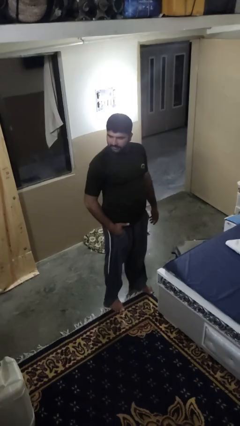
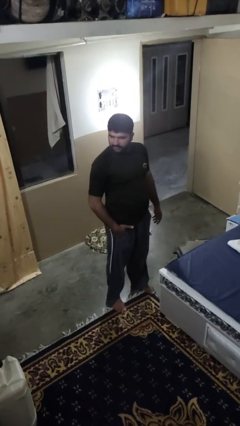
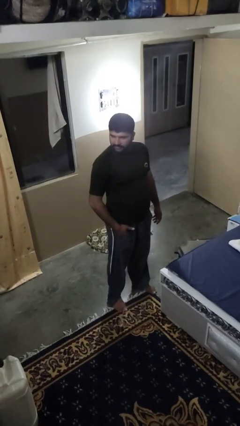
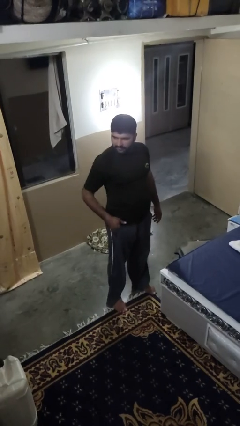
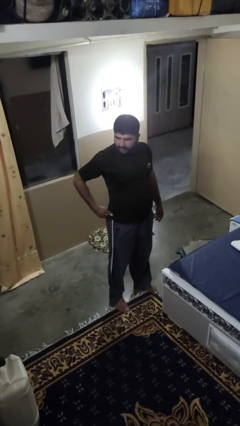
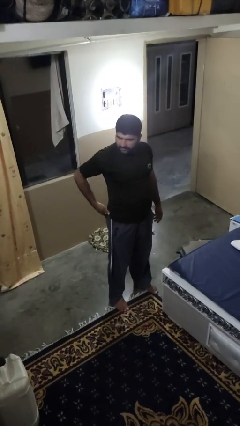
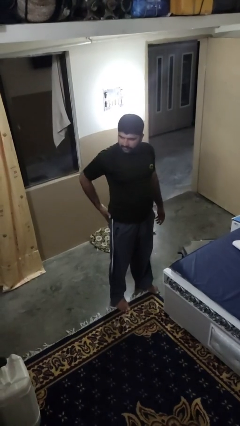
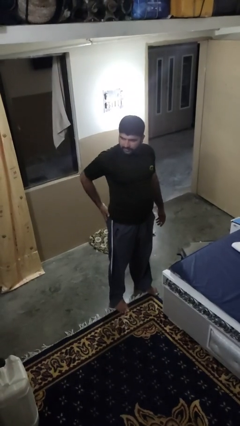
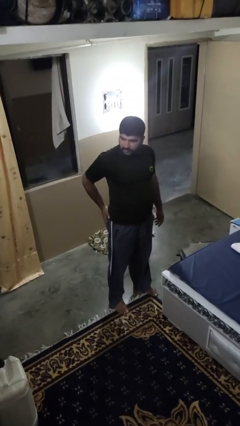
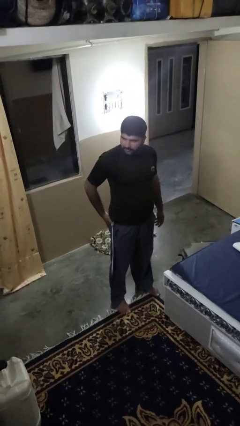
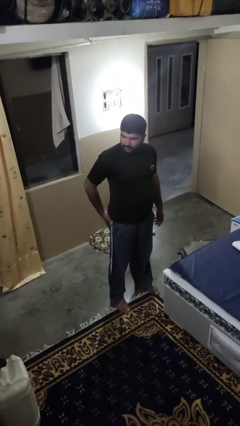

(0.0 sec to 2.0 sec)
person puts hands in back pockets

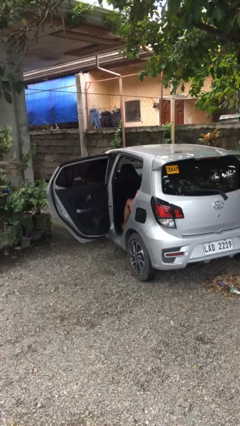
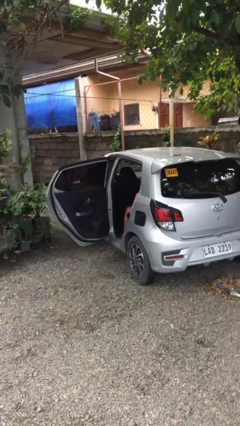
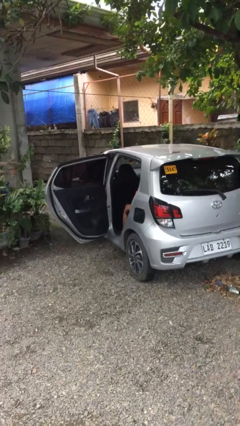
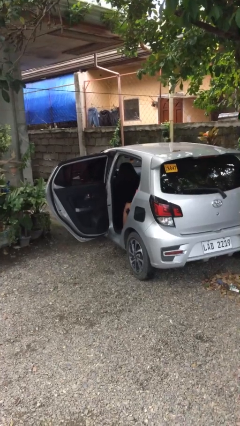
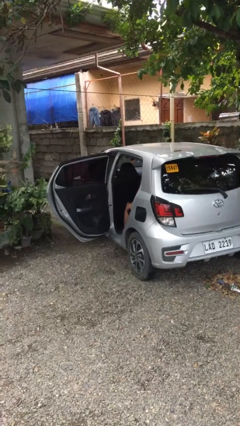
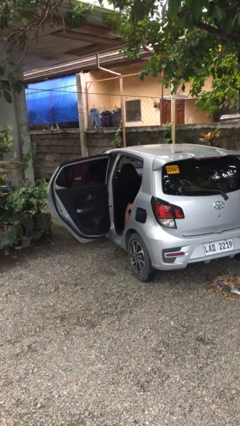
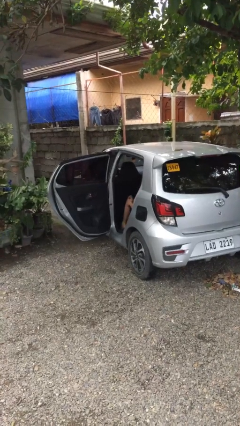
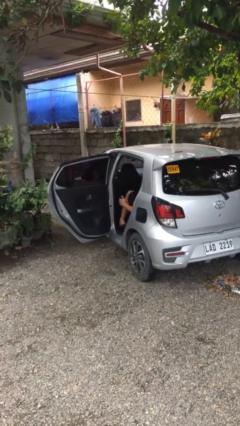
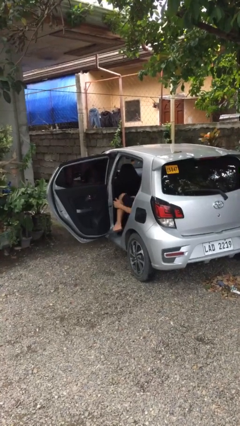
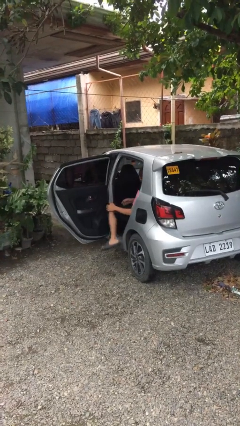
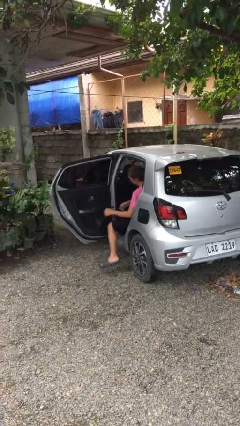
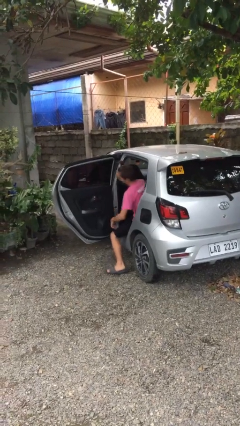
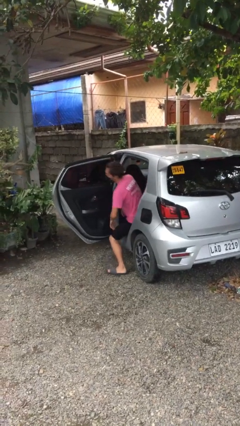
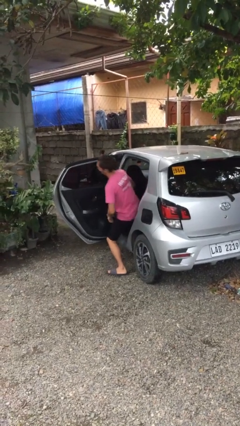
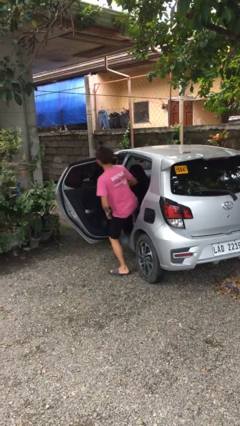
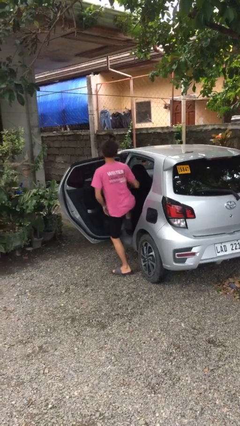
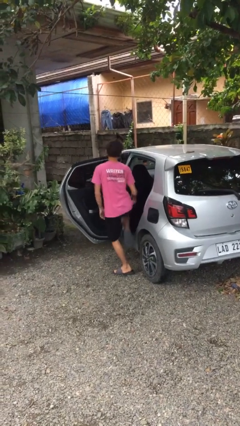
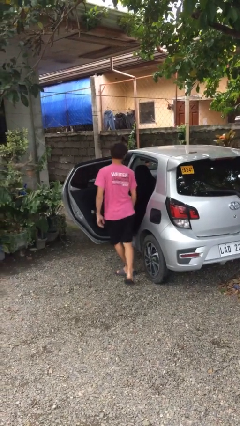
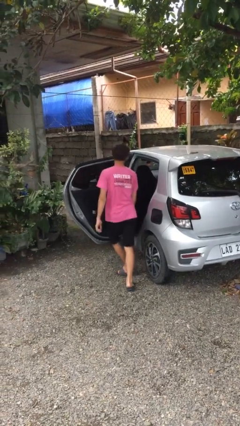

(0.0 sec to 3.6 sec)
person exits car

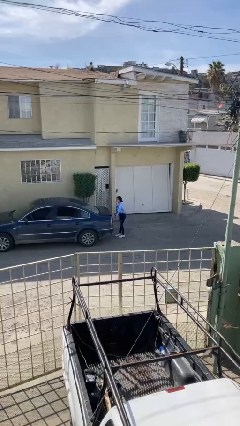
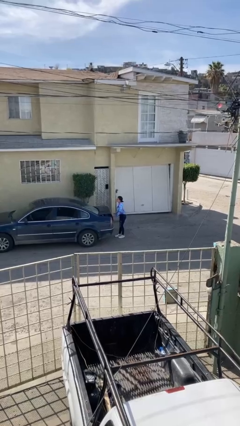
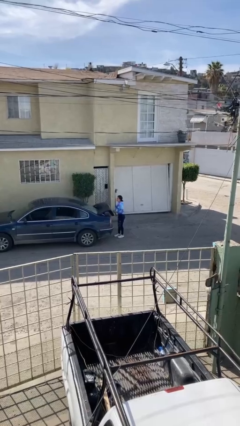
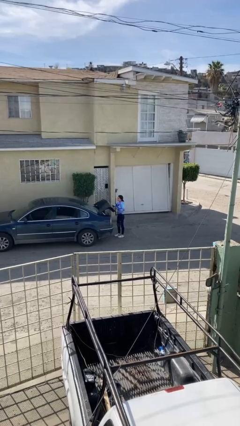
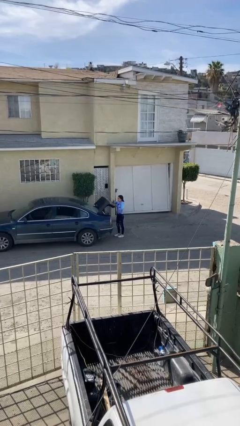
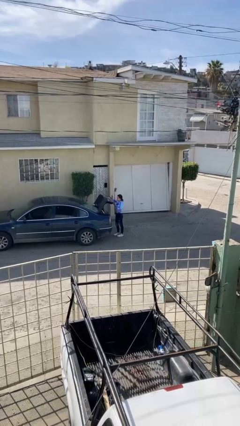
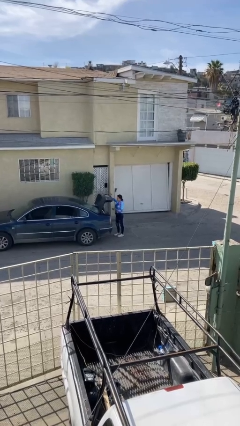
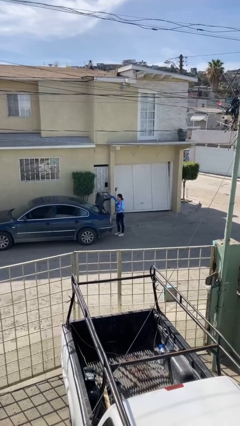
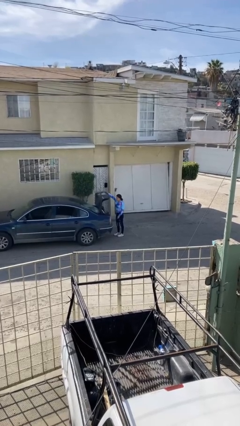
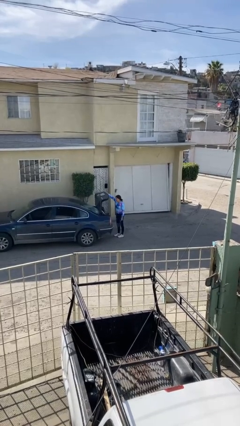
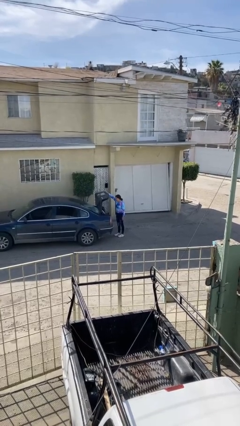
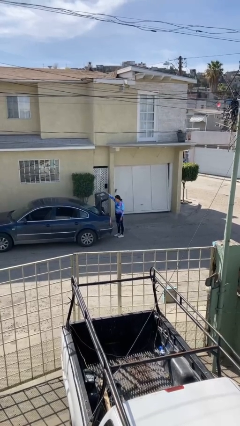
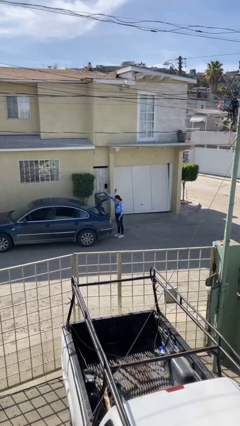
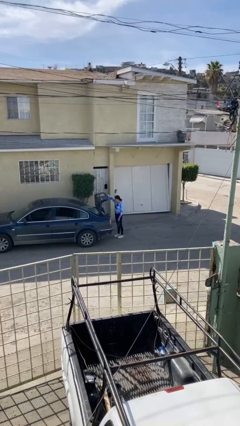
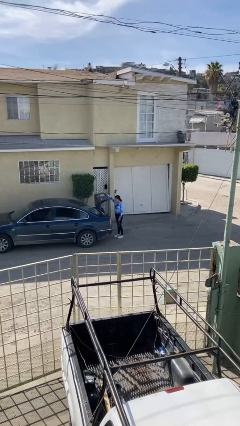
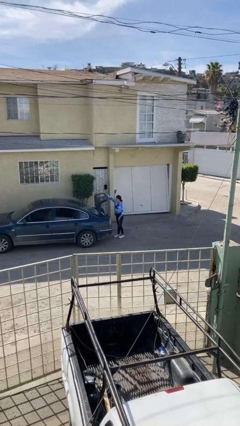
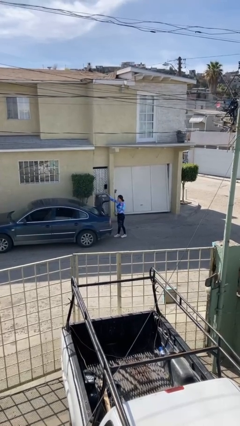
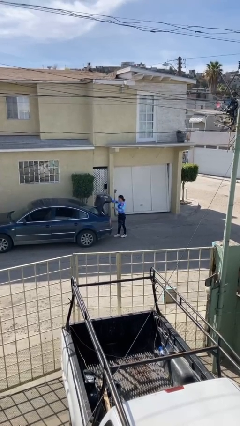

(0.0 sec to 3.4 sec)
person opens car trunk

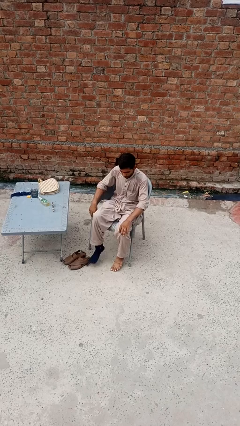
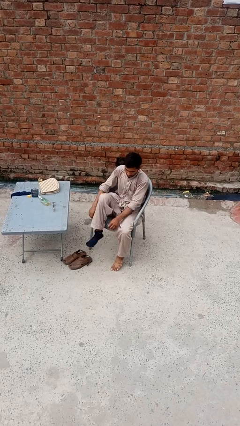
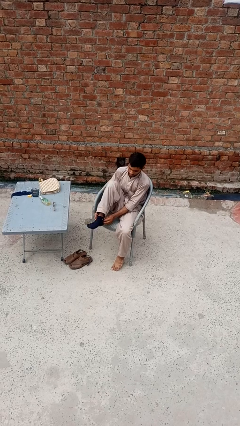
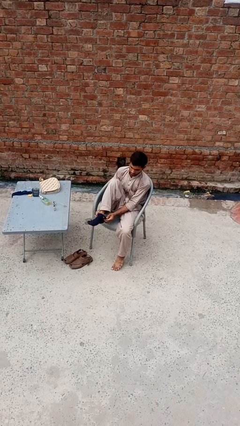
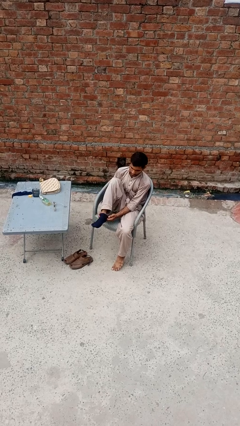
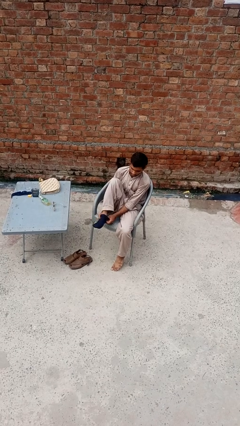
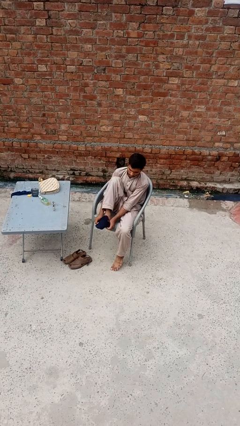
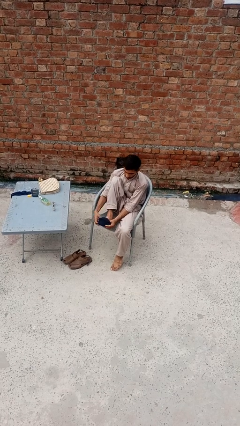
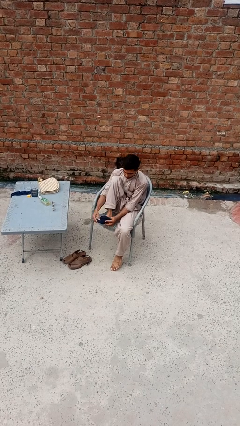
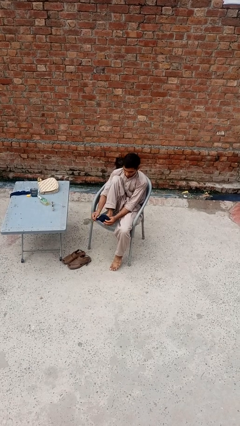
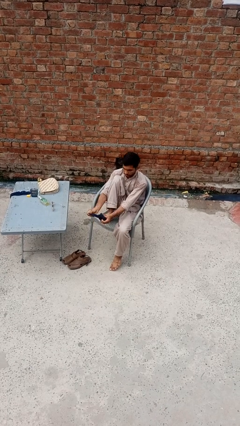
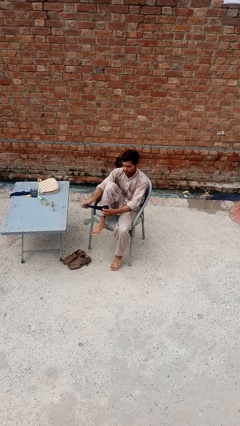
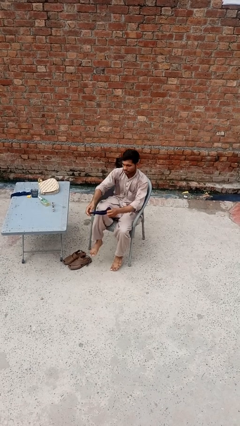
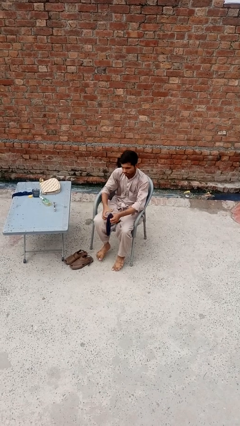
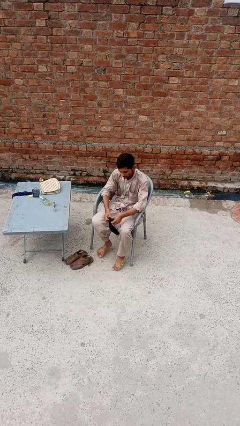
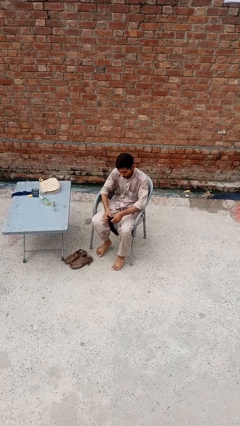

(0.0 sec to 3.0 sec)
person takes off socks

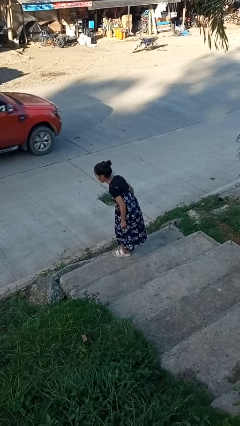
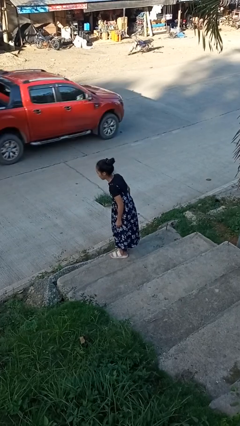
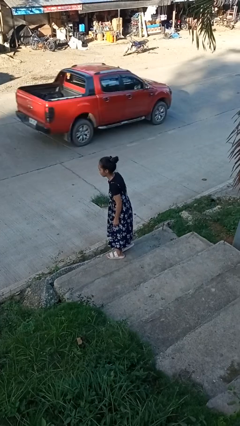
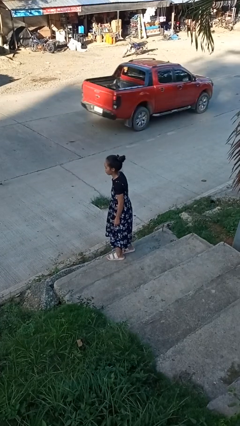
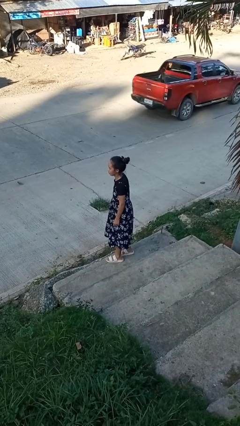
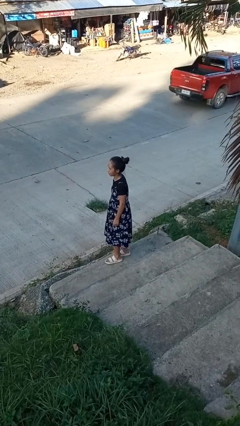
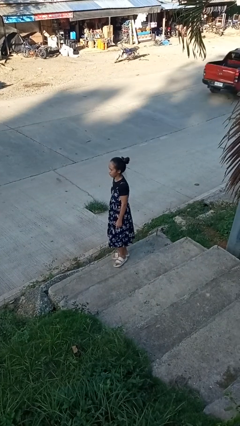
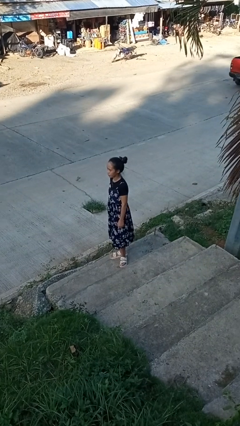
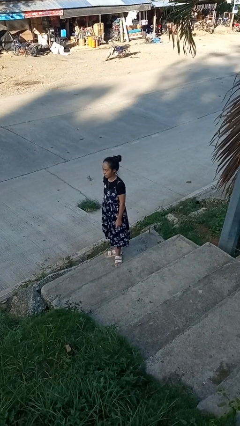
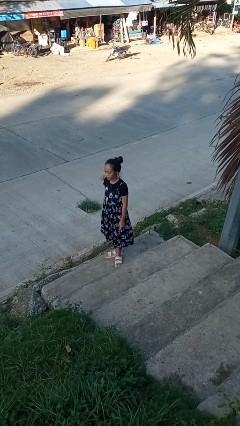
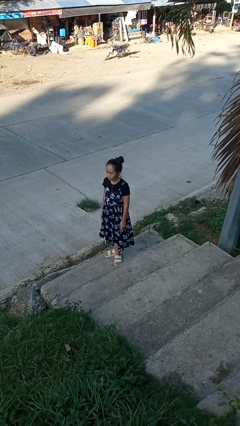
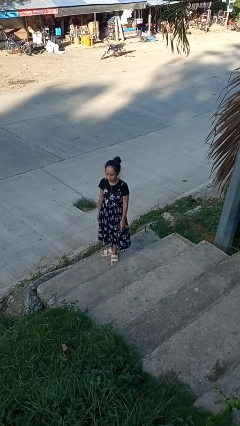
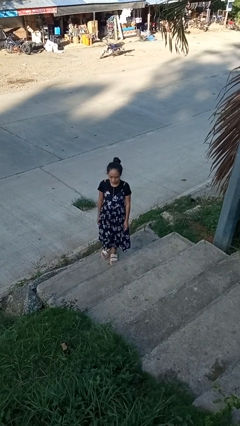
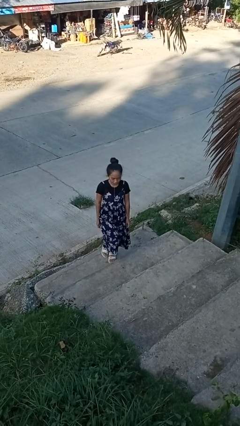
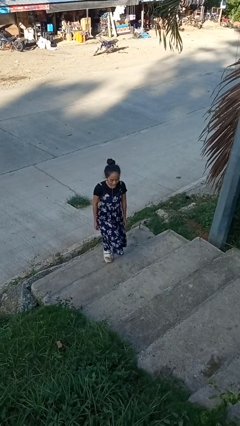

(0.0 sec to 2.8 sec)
person trips on stair

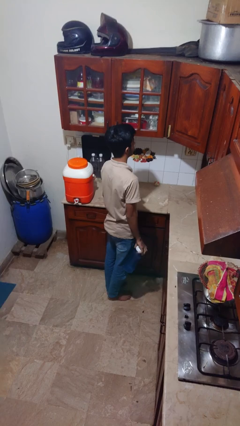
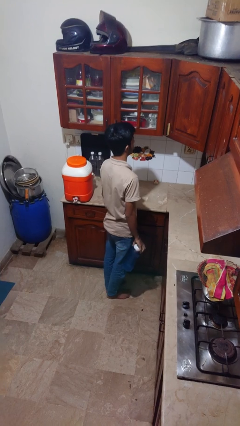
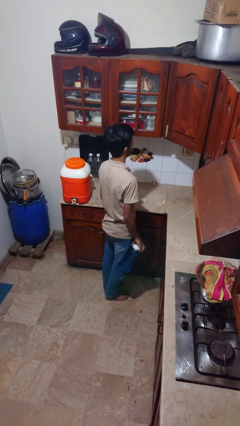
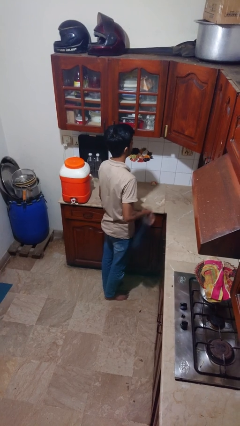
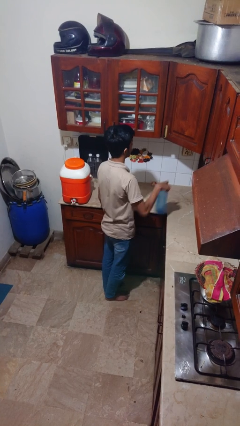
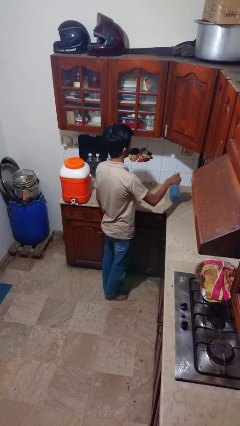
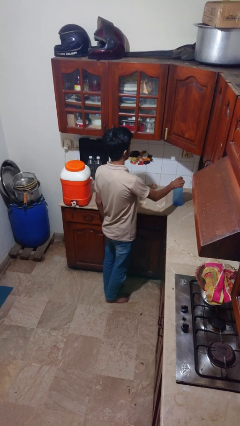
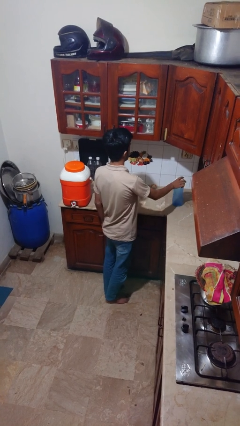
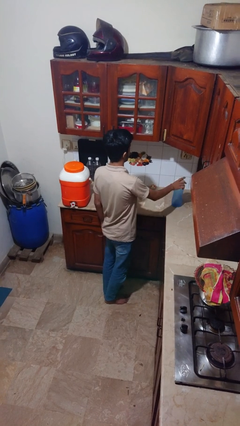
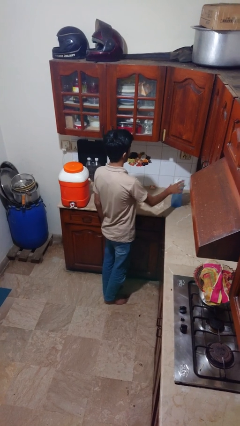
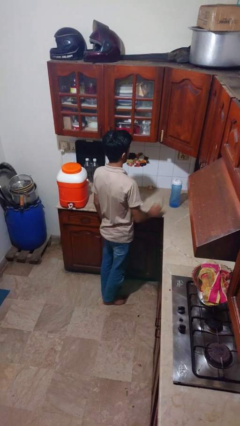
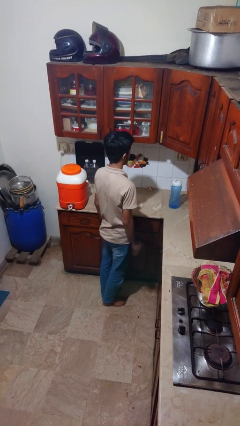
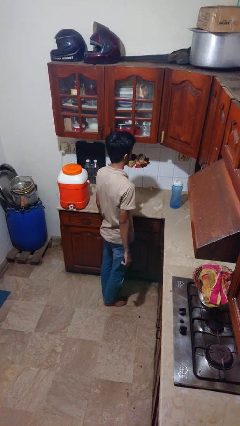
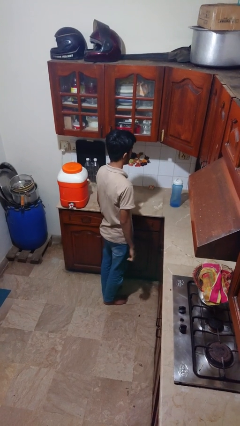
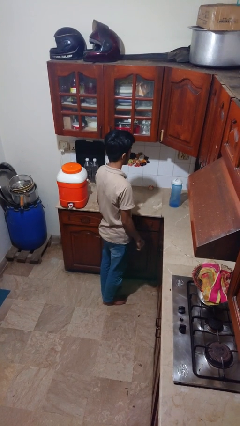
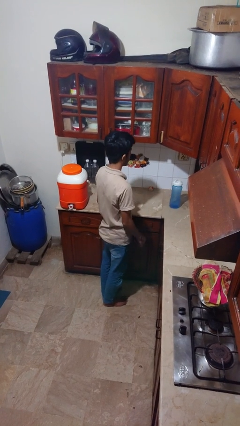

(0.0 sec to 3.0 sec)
person puts down object on countertop

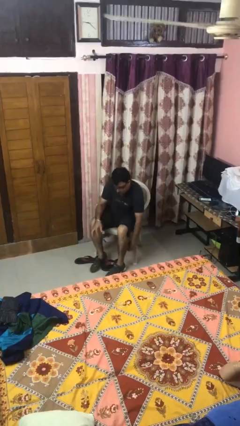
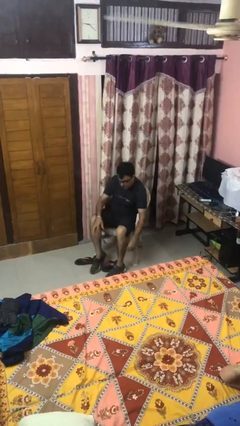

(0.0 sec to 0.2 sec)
person takes off shoes
